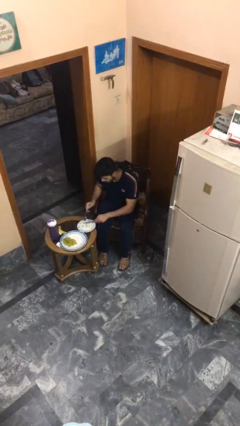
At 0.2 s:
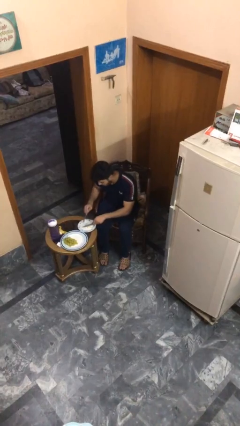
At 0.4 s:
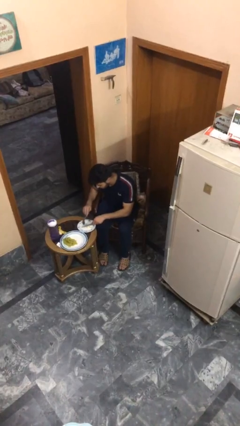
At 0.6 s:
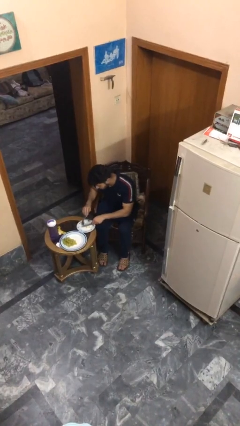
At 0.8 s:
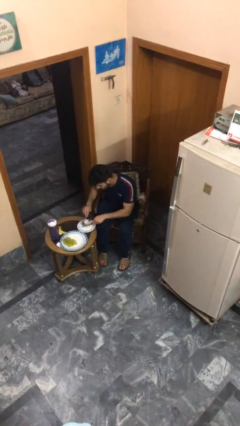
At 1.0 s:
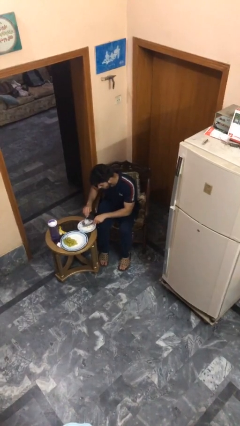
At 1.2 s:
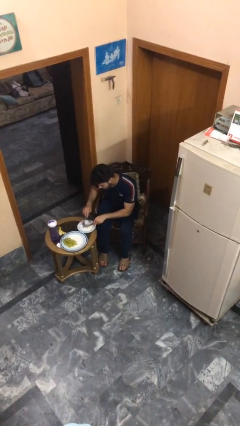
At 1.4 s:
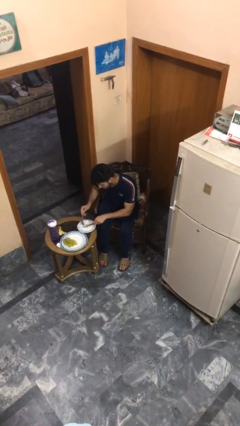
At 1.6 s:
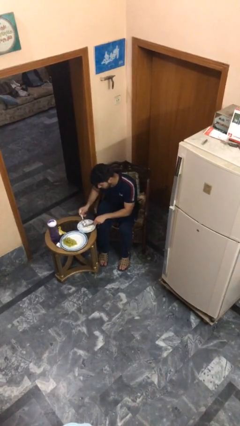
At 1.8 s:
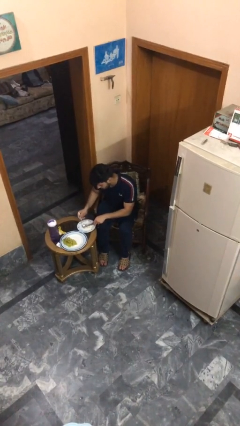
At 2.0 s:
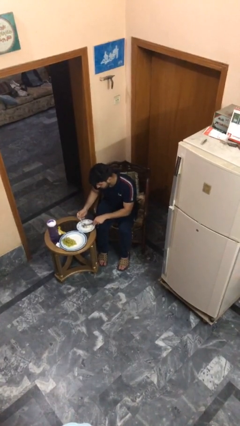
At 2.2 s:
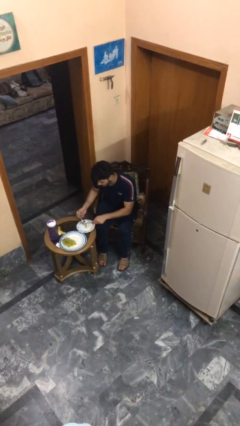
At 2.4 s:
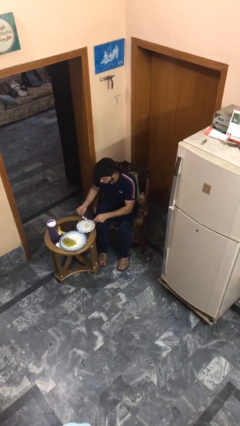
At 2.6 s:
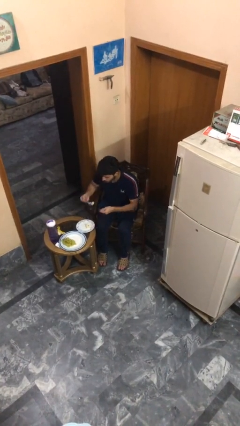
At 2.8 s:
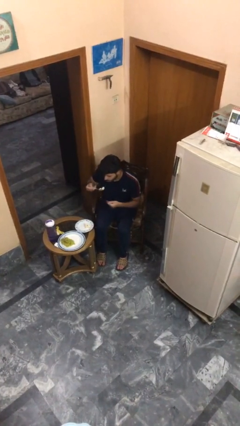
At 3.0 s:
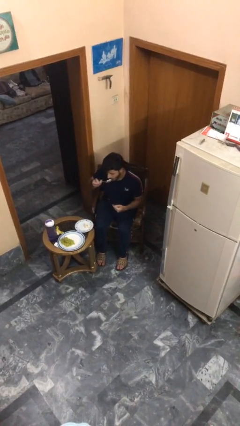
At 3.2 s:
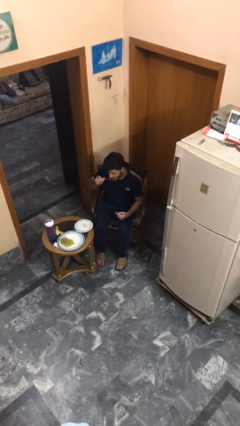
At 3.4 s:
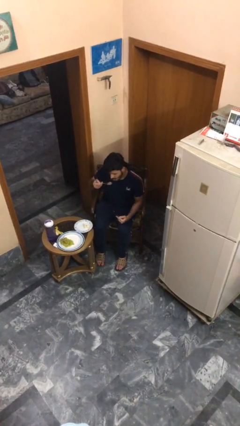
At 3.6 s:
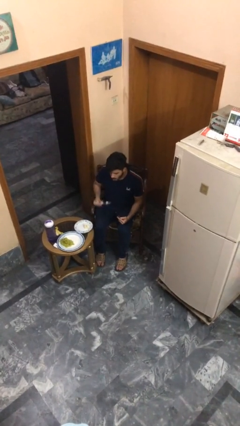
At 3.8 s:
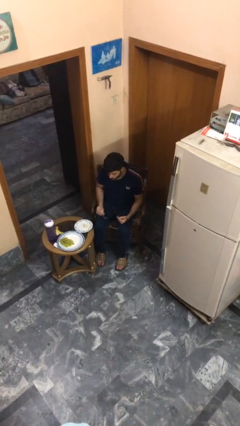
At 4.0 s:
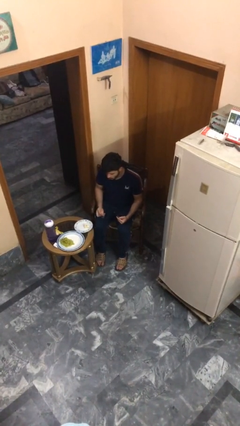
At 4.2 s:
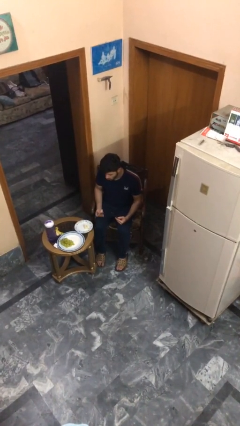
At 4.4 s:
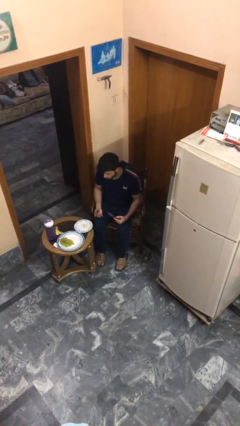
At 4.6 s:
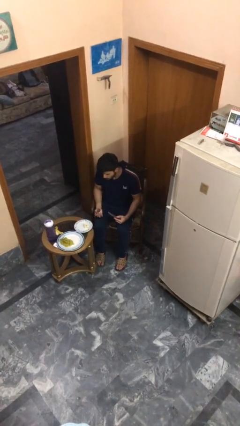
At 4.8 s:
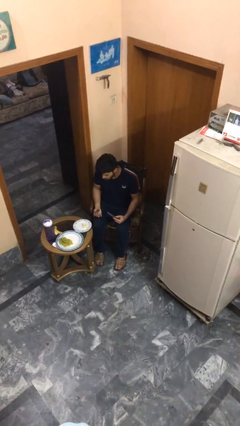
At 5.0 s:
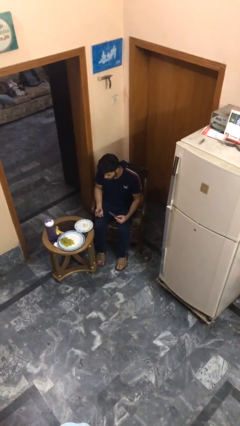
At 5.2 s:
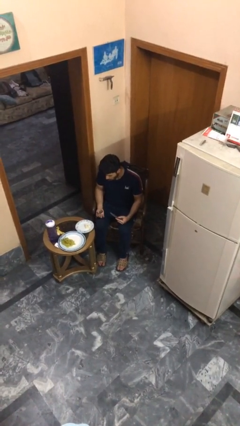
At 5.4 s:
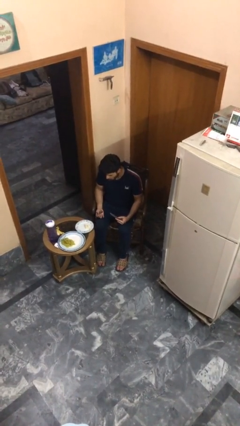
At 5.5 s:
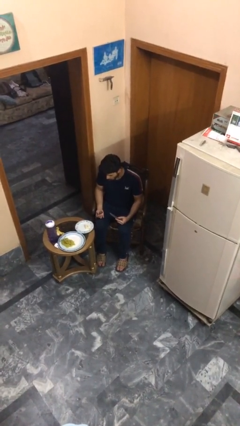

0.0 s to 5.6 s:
person eats with utensil

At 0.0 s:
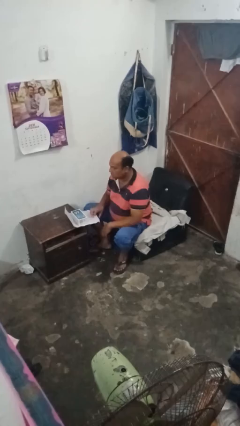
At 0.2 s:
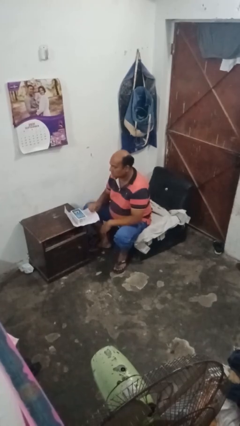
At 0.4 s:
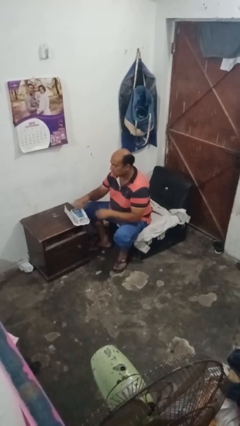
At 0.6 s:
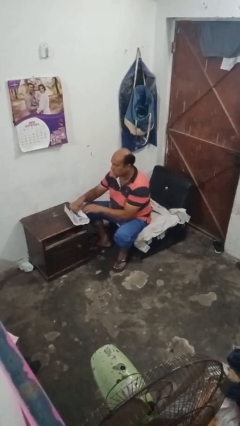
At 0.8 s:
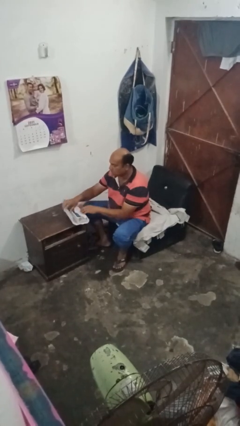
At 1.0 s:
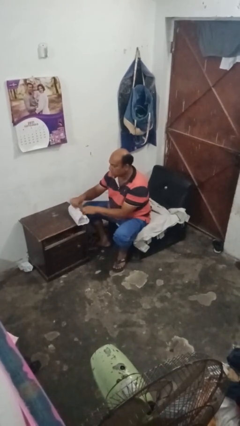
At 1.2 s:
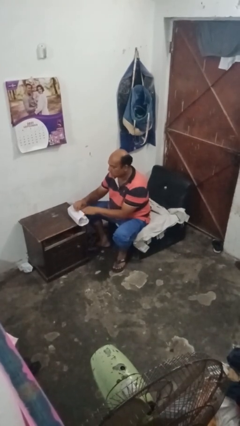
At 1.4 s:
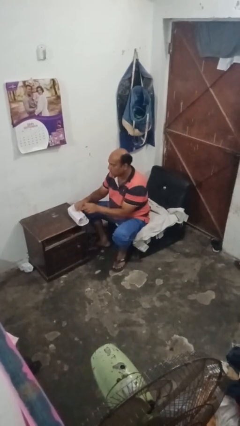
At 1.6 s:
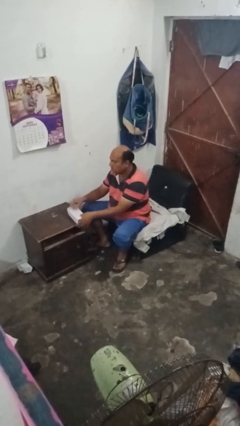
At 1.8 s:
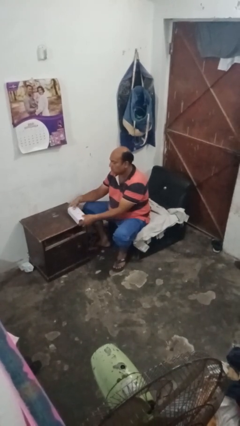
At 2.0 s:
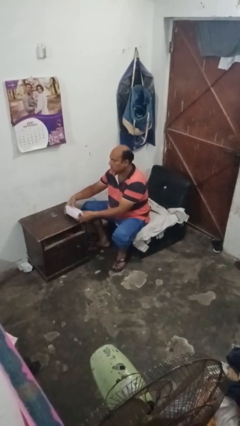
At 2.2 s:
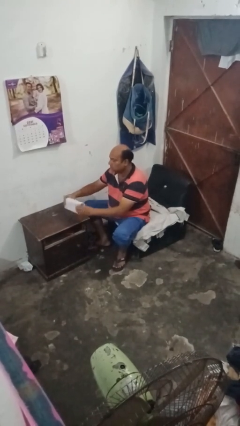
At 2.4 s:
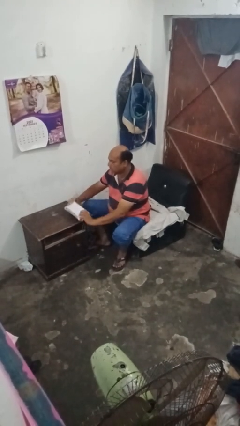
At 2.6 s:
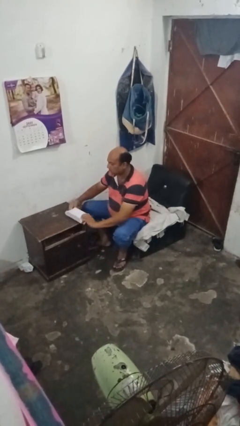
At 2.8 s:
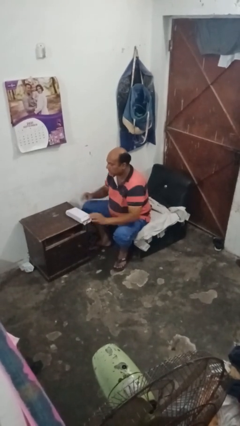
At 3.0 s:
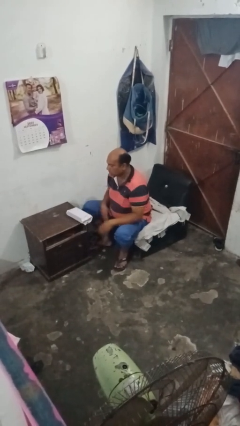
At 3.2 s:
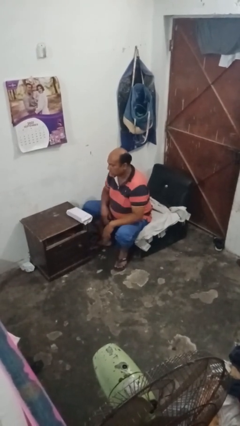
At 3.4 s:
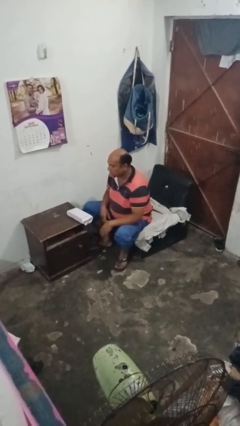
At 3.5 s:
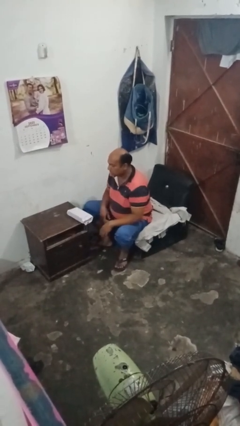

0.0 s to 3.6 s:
person wraps box

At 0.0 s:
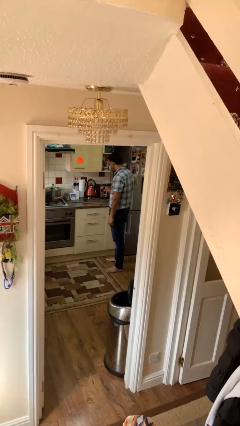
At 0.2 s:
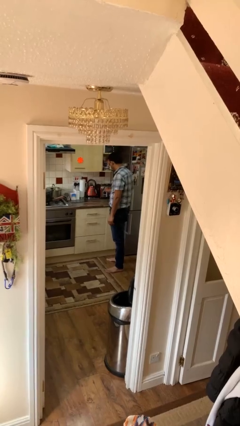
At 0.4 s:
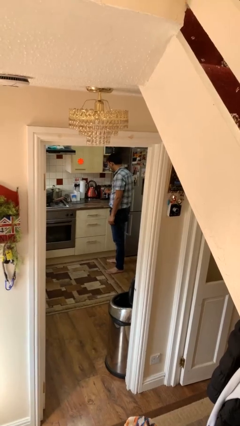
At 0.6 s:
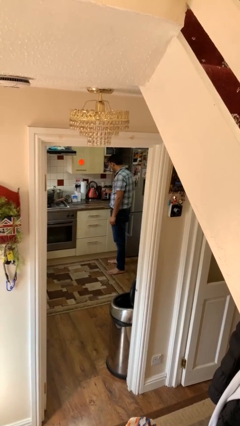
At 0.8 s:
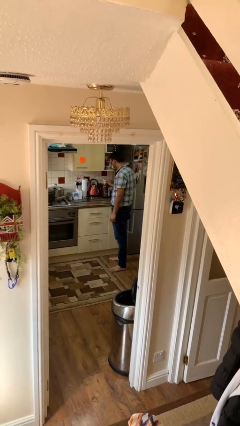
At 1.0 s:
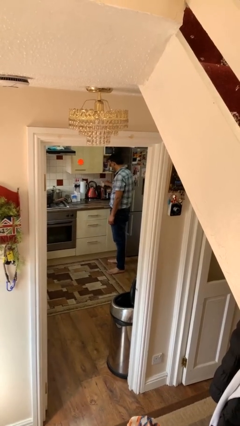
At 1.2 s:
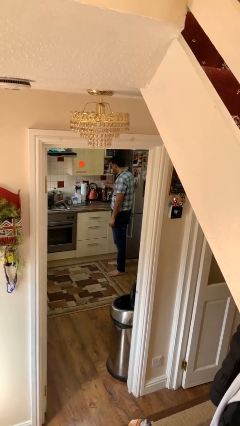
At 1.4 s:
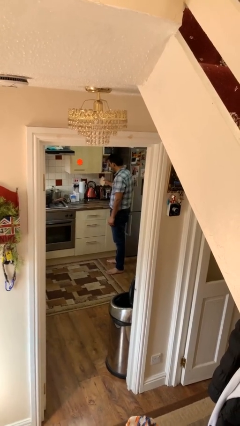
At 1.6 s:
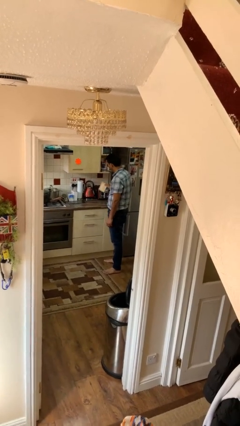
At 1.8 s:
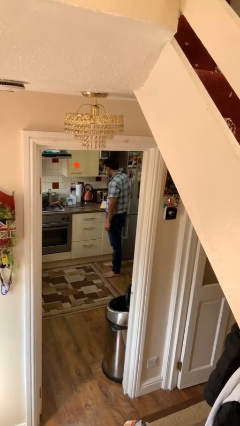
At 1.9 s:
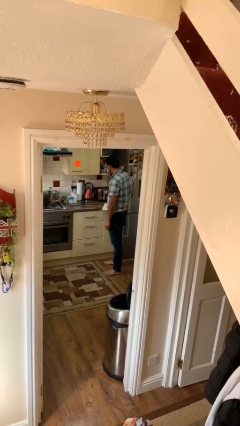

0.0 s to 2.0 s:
person takes object from toaster

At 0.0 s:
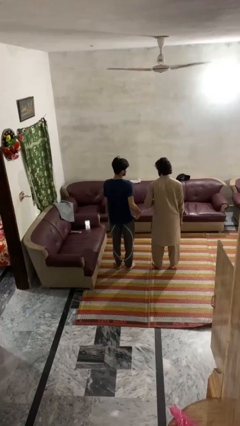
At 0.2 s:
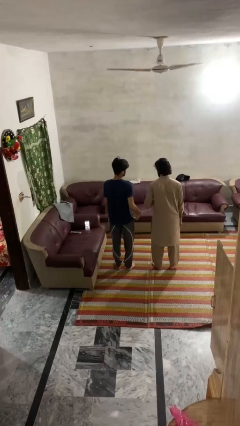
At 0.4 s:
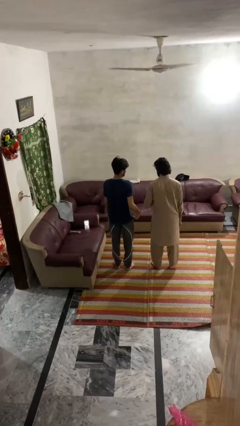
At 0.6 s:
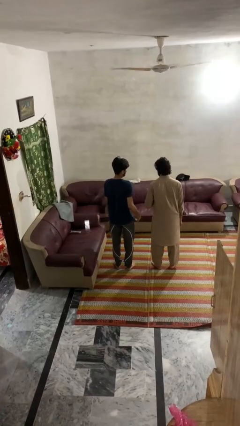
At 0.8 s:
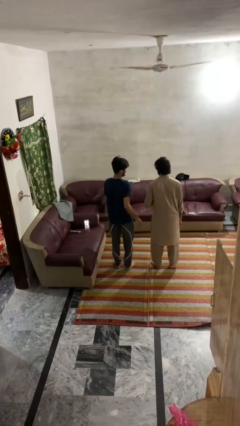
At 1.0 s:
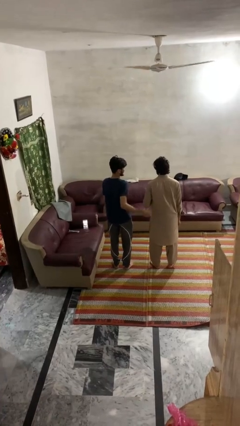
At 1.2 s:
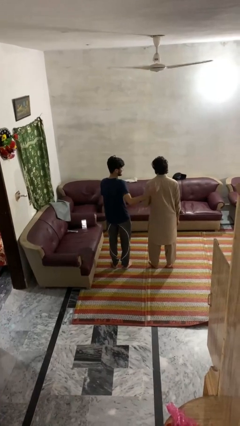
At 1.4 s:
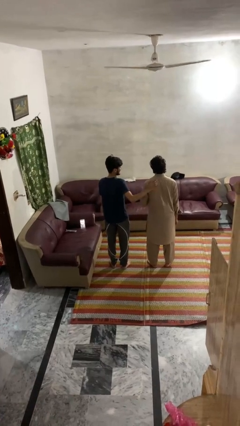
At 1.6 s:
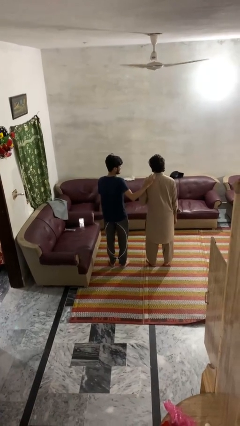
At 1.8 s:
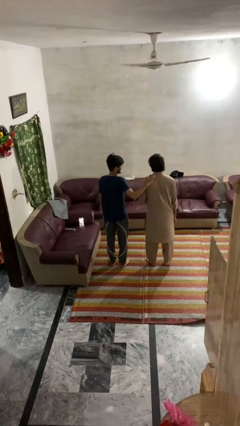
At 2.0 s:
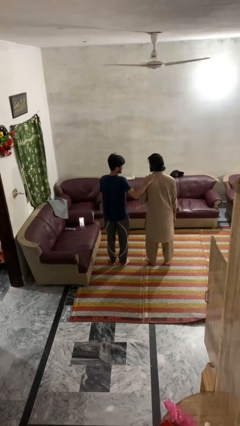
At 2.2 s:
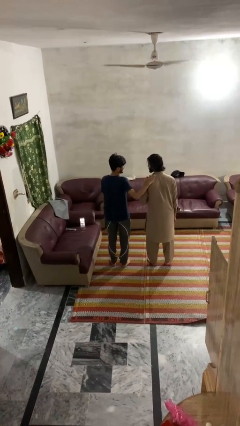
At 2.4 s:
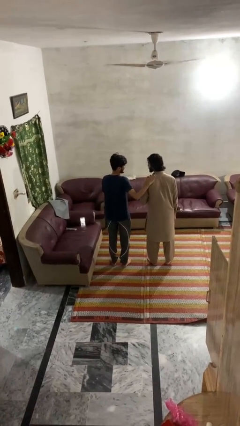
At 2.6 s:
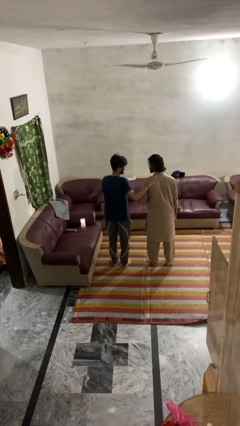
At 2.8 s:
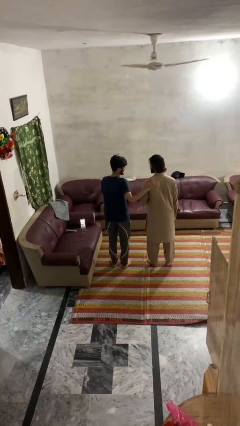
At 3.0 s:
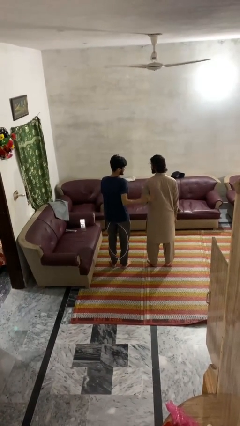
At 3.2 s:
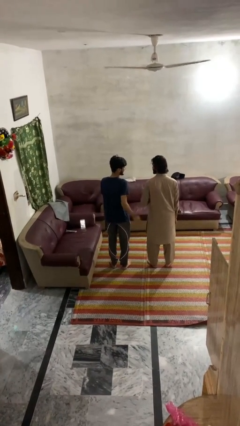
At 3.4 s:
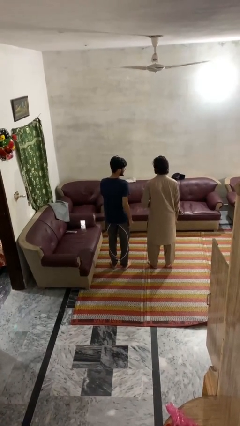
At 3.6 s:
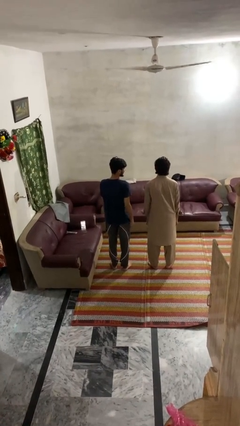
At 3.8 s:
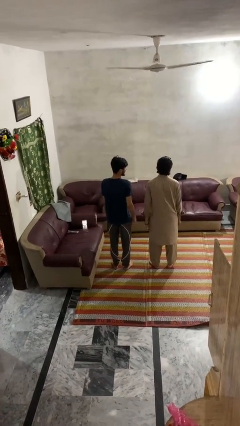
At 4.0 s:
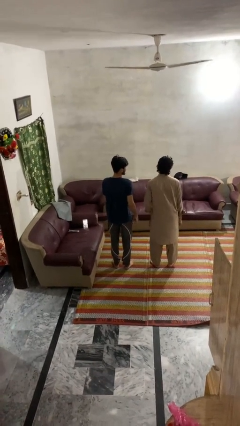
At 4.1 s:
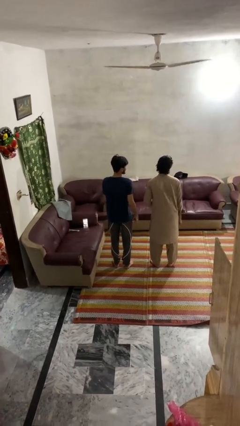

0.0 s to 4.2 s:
person pounds shoulders of person

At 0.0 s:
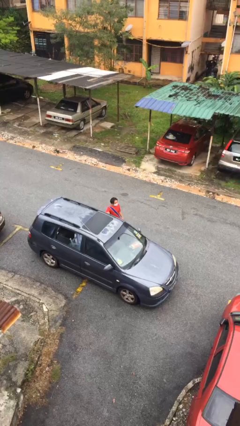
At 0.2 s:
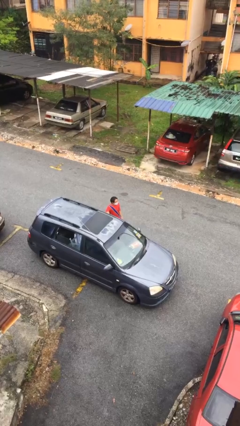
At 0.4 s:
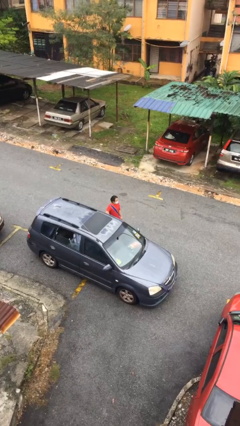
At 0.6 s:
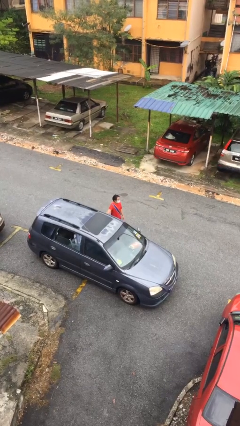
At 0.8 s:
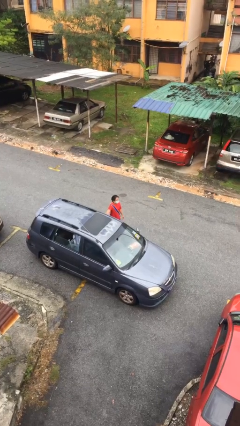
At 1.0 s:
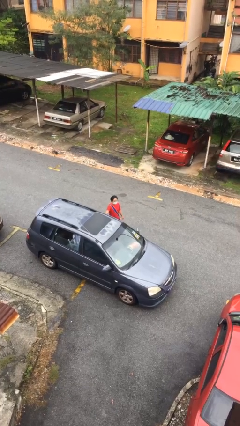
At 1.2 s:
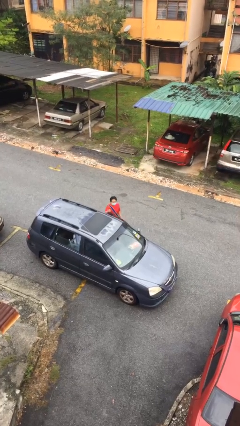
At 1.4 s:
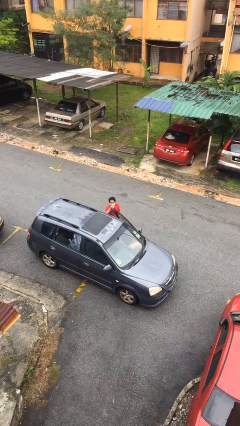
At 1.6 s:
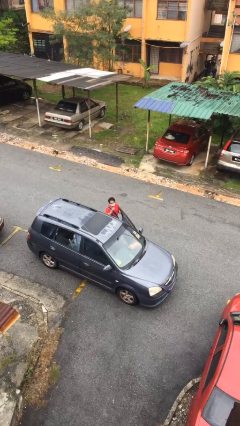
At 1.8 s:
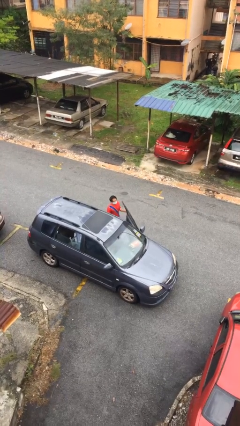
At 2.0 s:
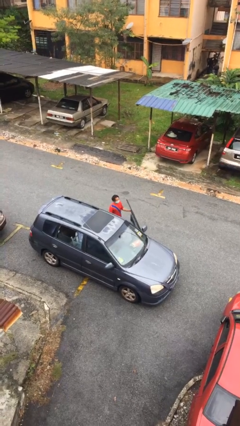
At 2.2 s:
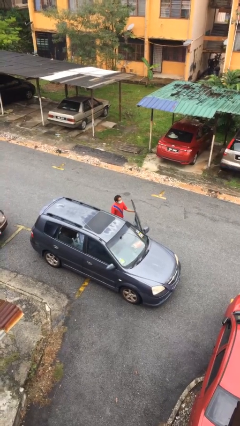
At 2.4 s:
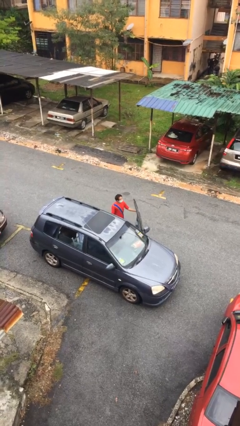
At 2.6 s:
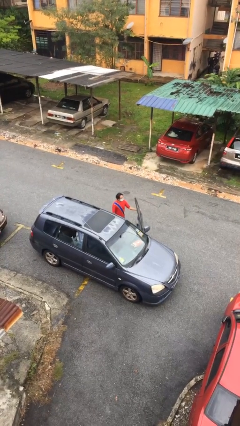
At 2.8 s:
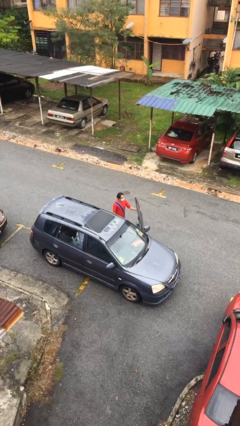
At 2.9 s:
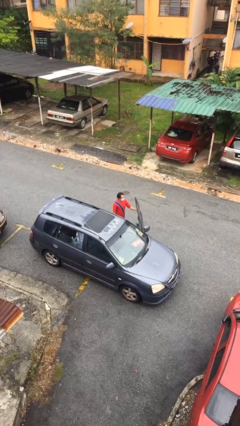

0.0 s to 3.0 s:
person opens car door
